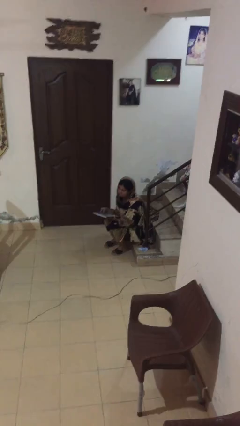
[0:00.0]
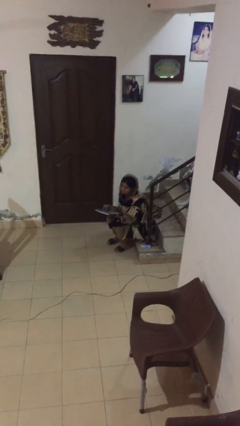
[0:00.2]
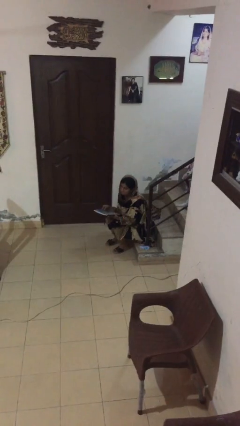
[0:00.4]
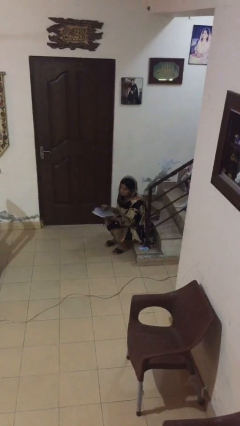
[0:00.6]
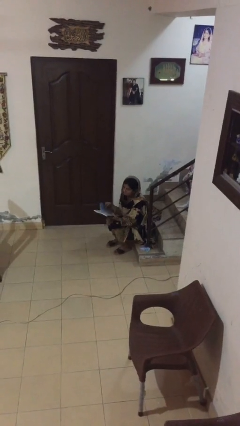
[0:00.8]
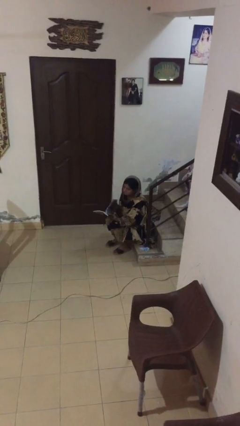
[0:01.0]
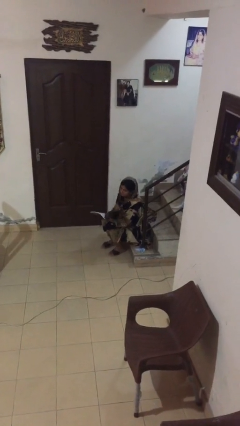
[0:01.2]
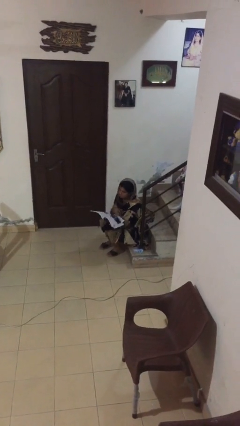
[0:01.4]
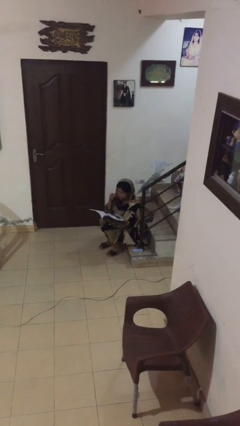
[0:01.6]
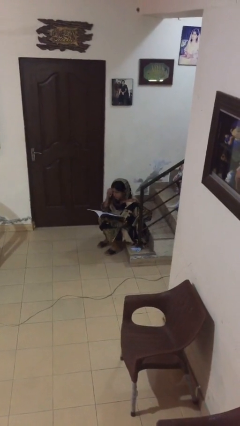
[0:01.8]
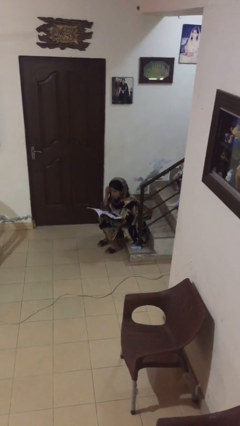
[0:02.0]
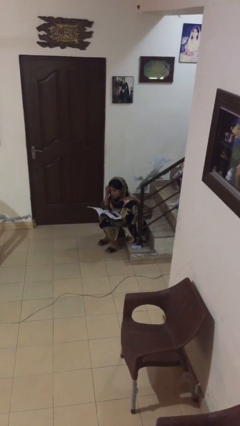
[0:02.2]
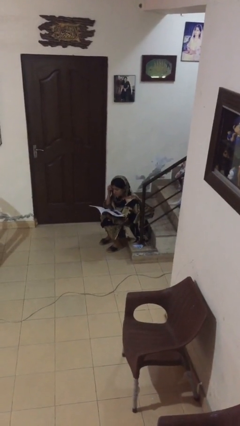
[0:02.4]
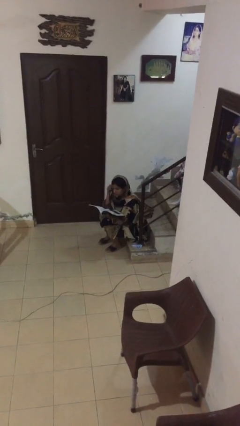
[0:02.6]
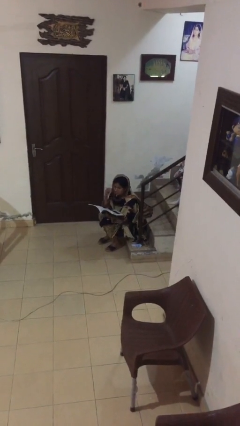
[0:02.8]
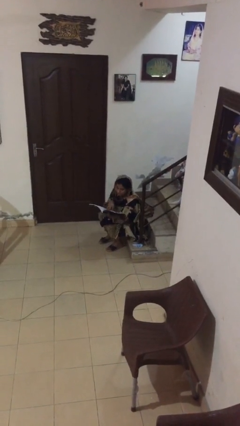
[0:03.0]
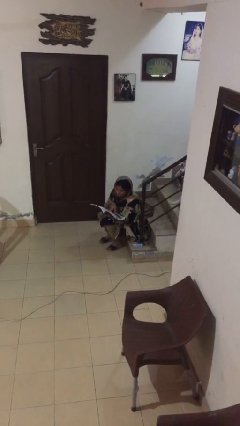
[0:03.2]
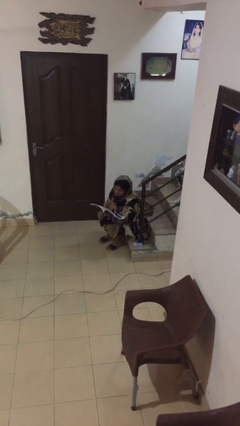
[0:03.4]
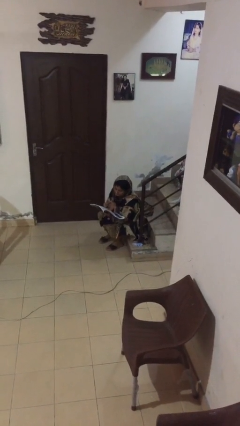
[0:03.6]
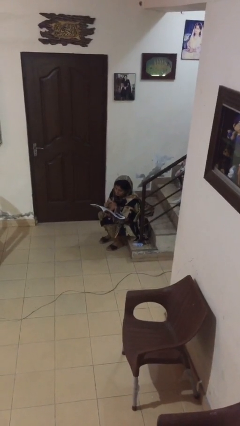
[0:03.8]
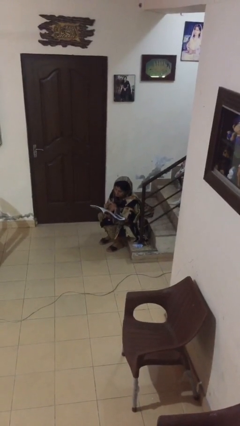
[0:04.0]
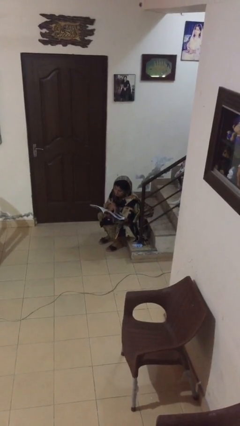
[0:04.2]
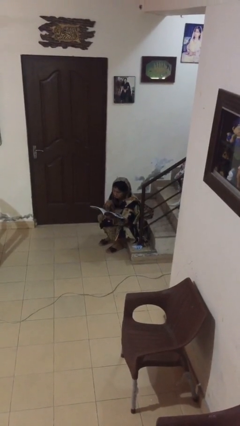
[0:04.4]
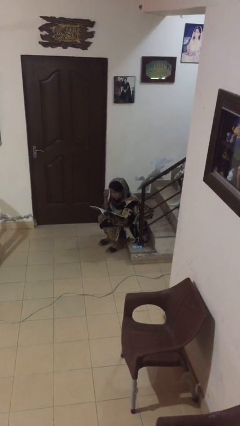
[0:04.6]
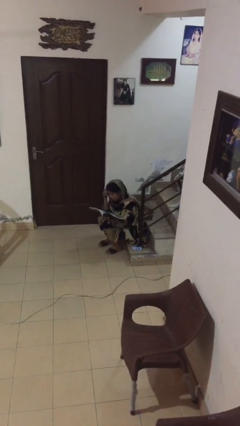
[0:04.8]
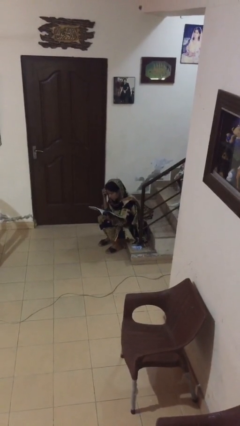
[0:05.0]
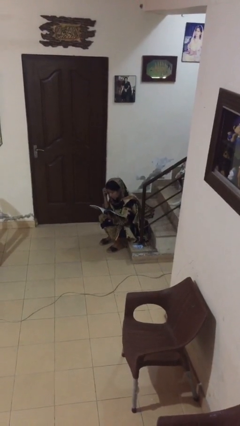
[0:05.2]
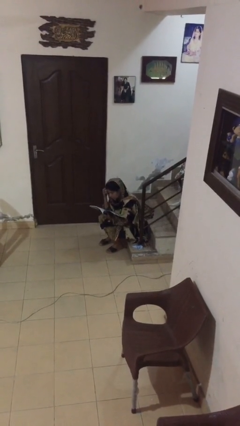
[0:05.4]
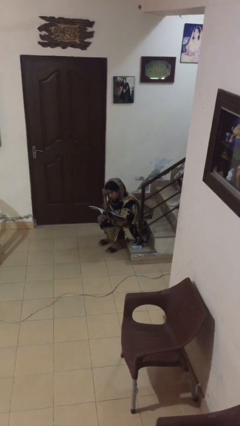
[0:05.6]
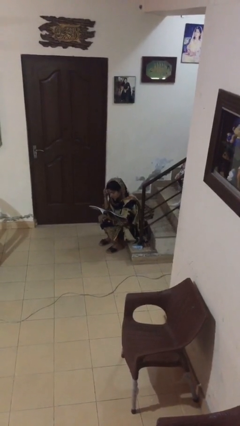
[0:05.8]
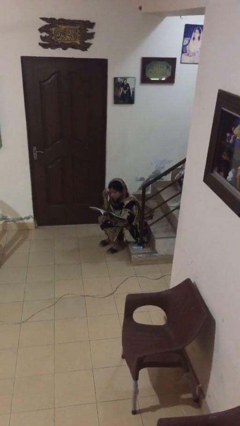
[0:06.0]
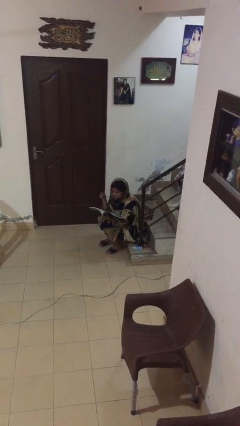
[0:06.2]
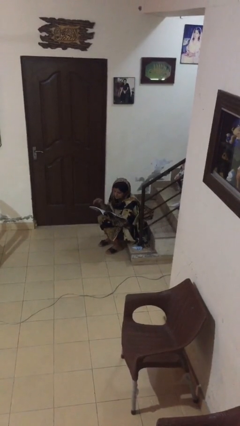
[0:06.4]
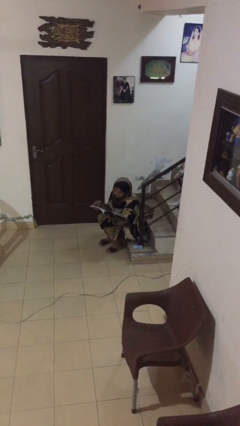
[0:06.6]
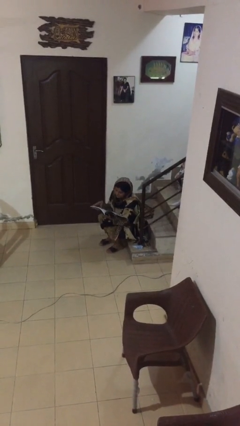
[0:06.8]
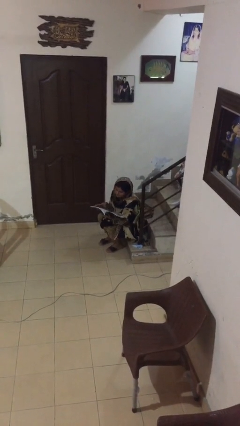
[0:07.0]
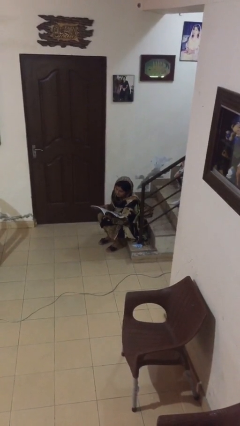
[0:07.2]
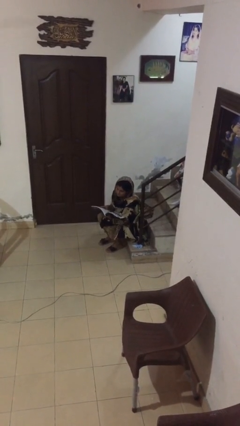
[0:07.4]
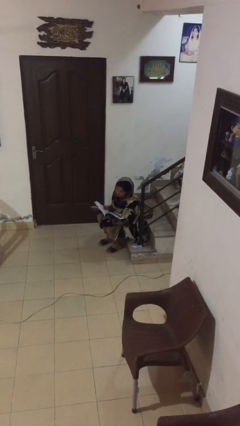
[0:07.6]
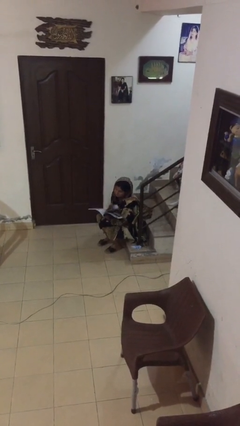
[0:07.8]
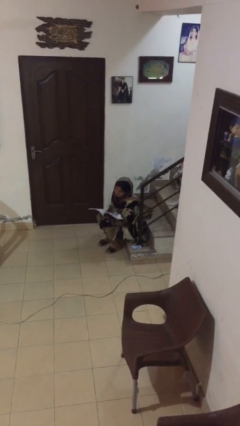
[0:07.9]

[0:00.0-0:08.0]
person reads document

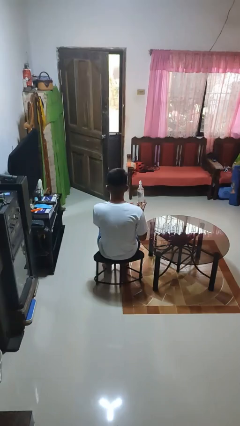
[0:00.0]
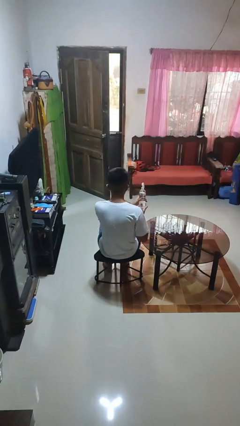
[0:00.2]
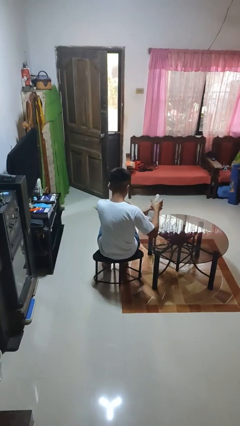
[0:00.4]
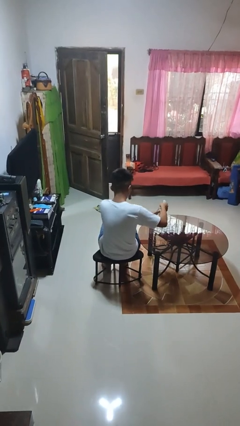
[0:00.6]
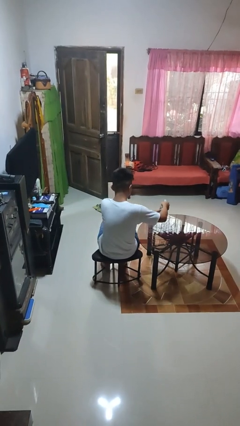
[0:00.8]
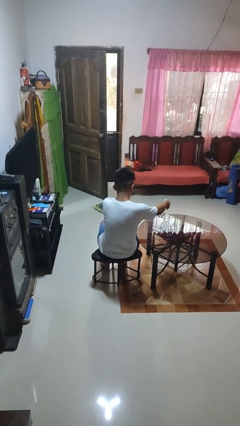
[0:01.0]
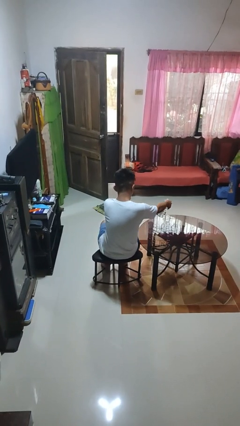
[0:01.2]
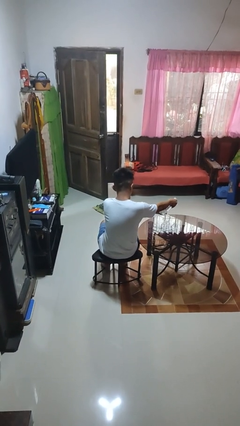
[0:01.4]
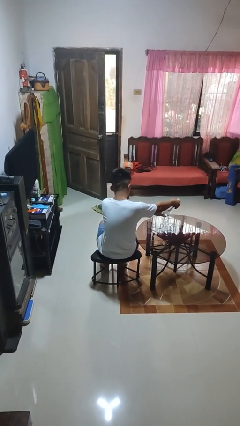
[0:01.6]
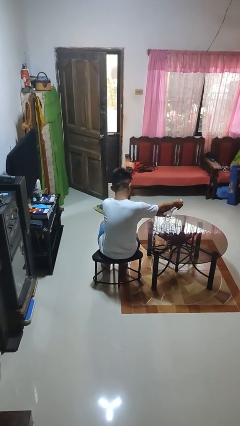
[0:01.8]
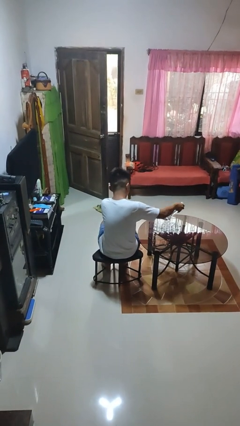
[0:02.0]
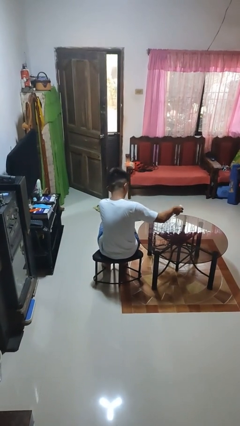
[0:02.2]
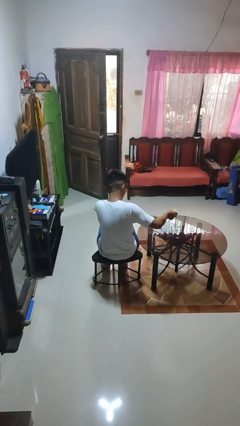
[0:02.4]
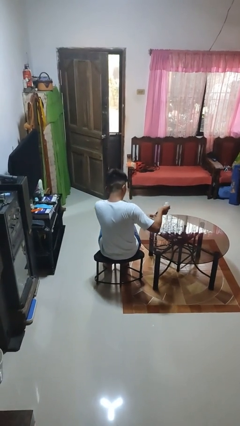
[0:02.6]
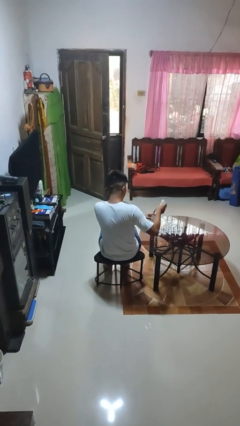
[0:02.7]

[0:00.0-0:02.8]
person sprays from bottle

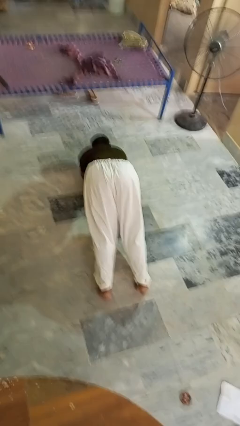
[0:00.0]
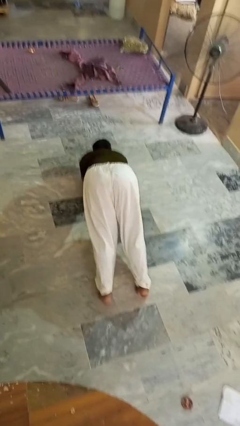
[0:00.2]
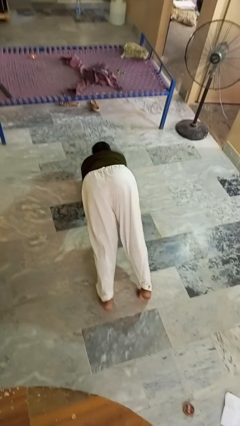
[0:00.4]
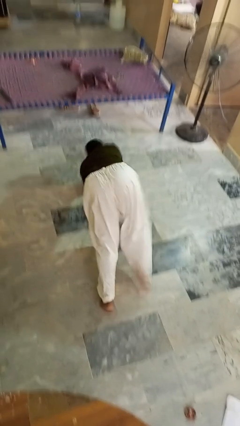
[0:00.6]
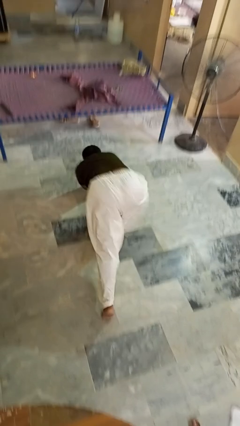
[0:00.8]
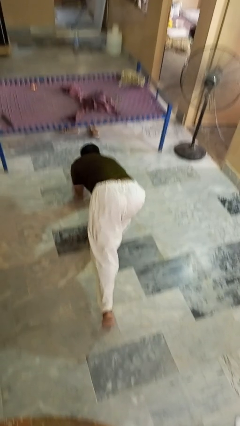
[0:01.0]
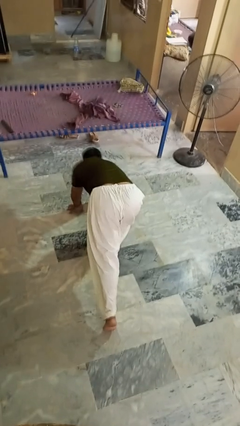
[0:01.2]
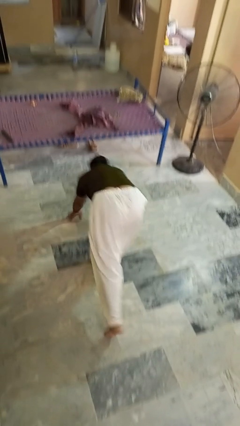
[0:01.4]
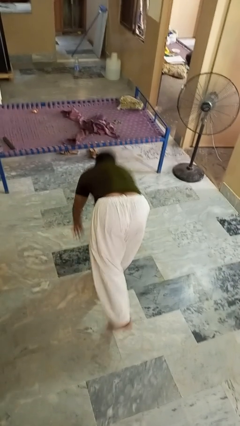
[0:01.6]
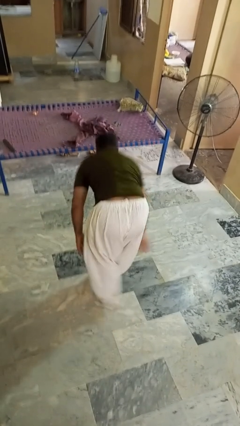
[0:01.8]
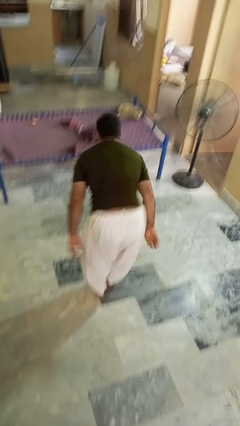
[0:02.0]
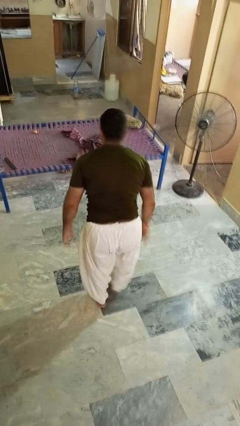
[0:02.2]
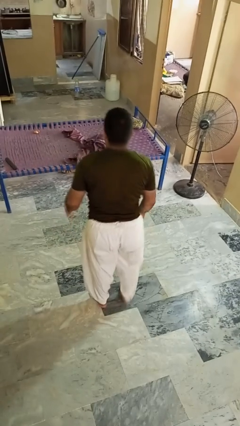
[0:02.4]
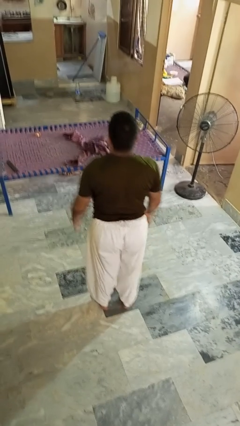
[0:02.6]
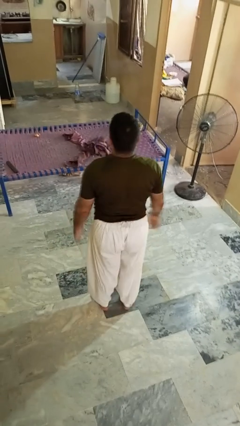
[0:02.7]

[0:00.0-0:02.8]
person stands up from floor

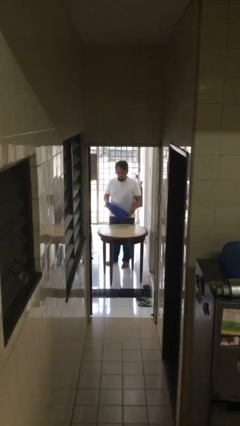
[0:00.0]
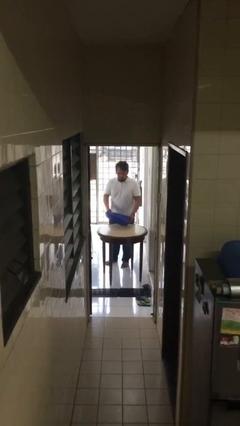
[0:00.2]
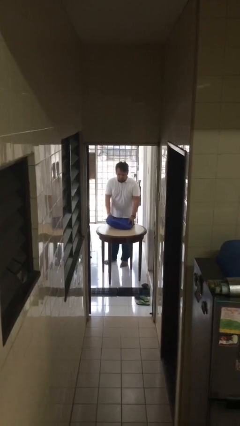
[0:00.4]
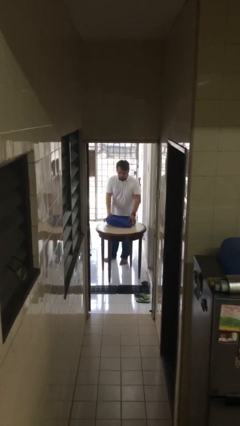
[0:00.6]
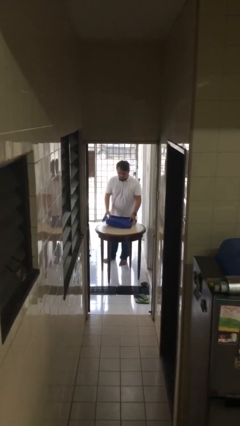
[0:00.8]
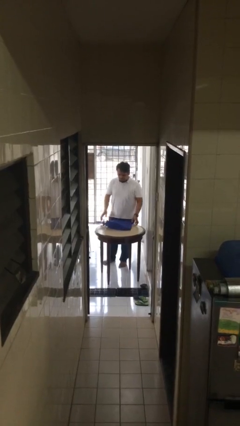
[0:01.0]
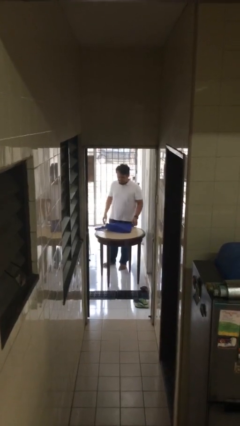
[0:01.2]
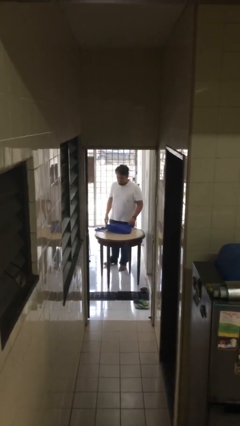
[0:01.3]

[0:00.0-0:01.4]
person puts down object on table

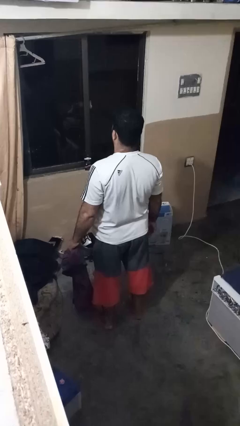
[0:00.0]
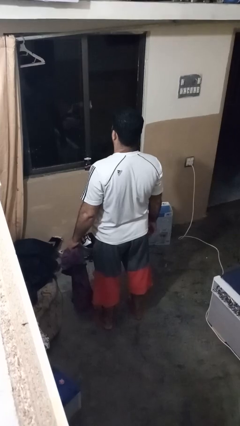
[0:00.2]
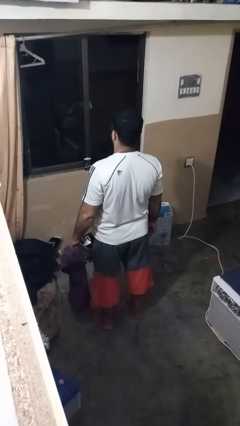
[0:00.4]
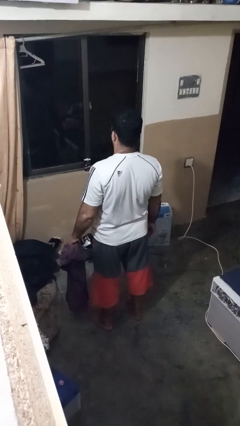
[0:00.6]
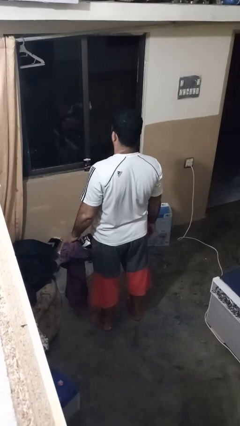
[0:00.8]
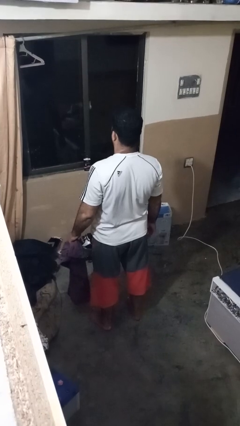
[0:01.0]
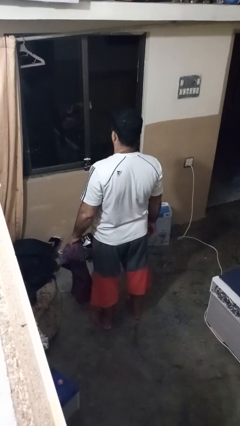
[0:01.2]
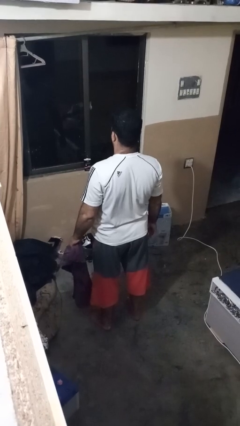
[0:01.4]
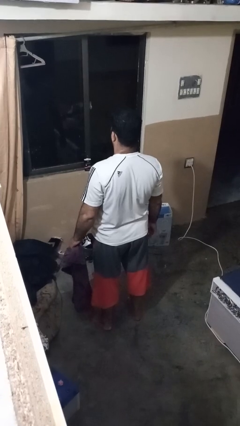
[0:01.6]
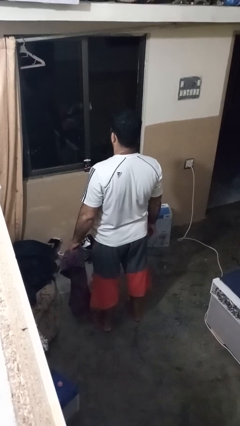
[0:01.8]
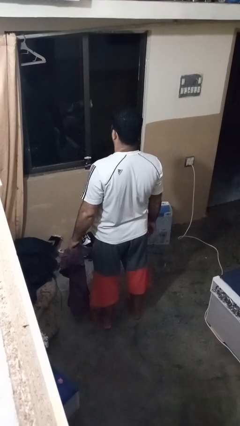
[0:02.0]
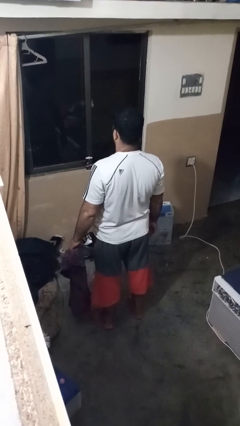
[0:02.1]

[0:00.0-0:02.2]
person ties jacket around waist

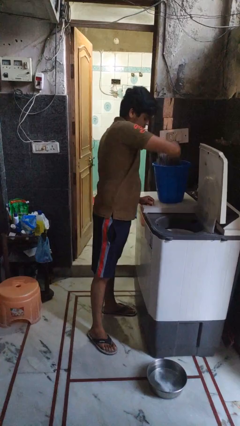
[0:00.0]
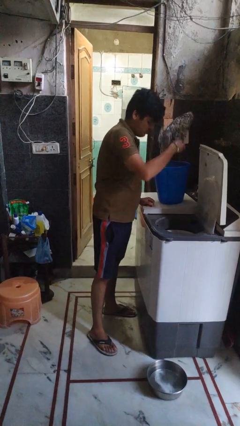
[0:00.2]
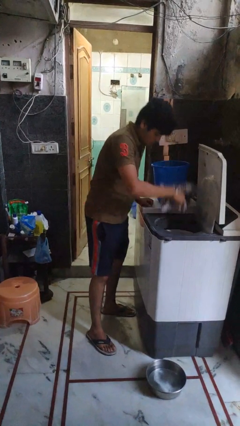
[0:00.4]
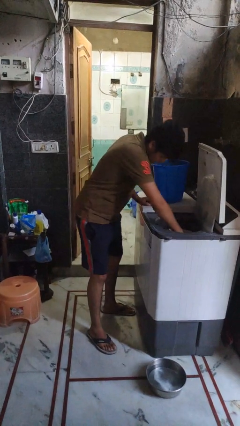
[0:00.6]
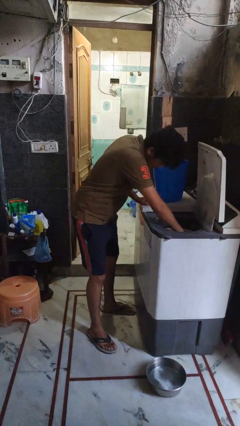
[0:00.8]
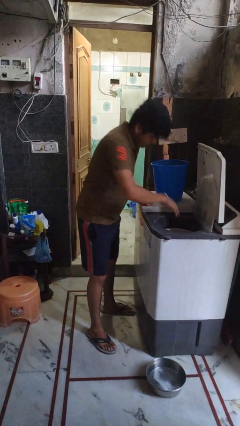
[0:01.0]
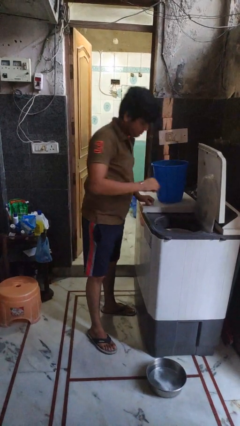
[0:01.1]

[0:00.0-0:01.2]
person loads dryer
